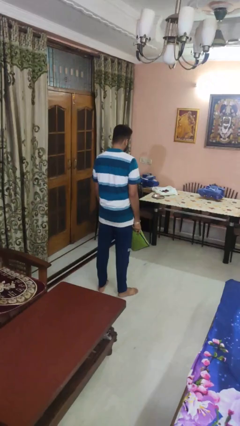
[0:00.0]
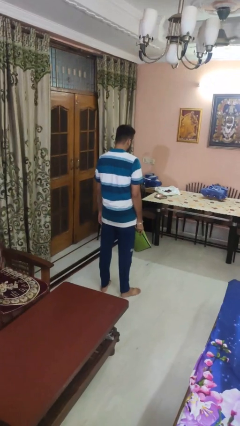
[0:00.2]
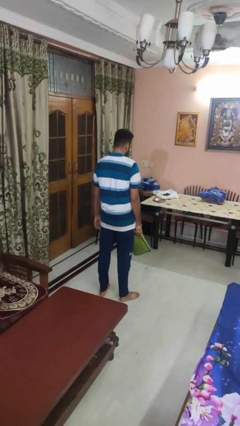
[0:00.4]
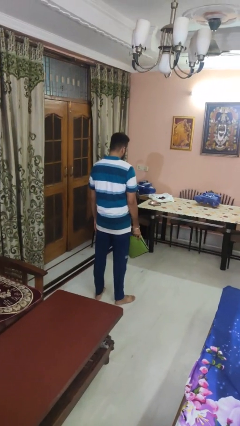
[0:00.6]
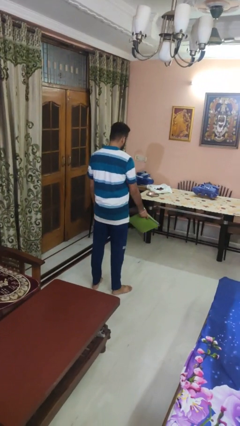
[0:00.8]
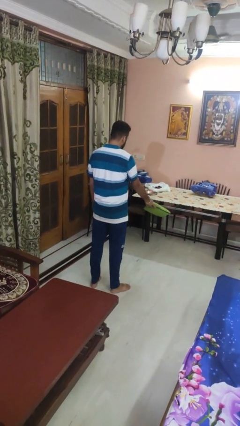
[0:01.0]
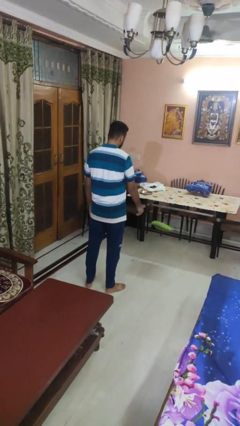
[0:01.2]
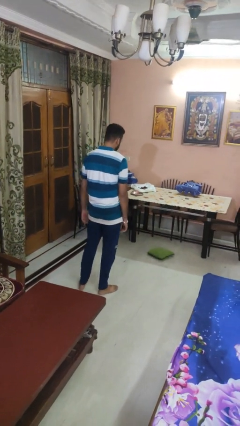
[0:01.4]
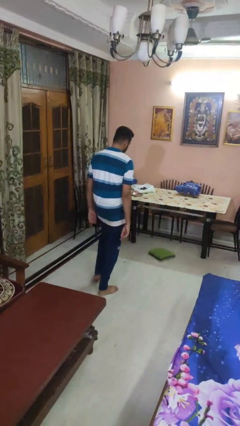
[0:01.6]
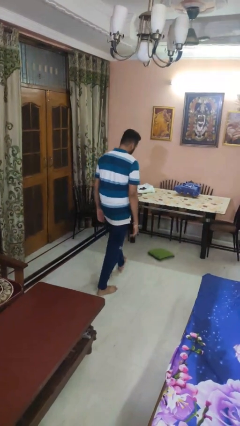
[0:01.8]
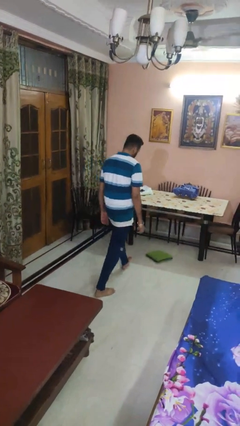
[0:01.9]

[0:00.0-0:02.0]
person throws object to ground

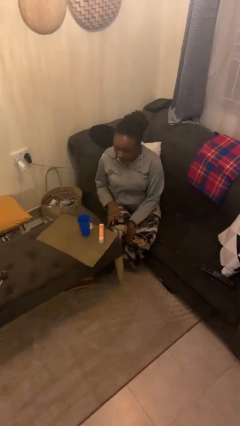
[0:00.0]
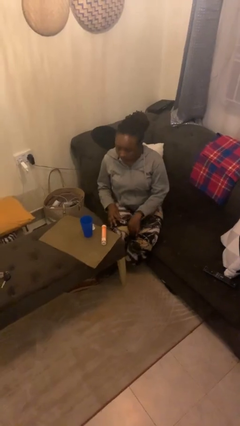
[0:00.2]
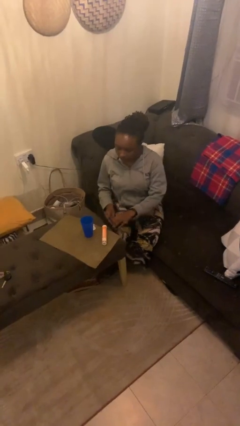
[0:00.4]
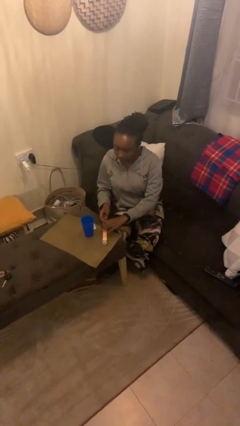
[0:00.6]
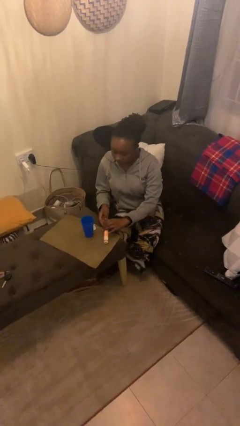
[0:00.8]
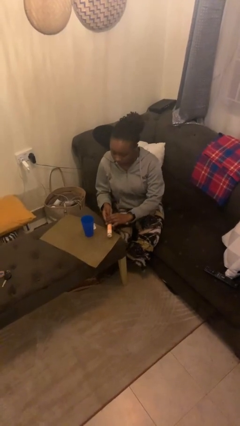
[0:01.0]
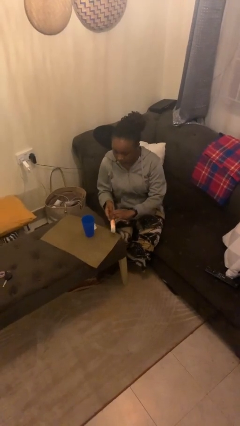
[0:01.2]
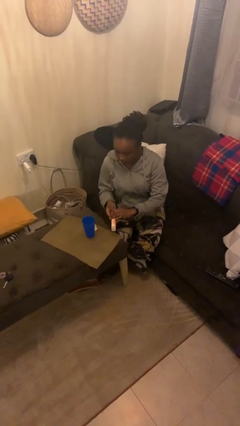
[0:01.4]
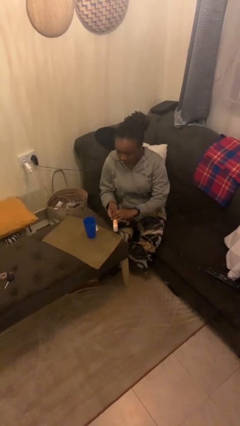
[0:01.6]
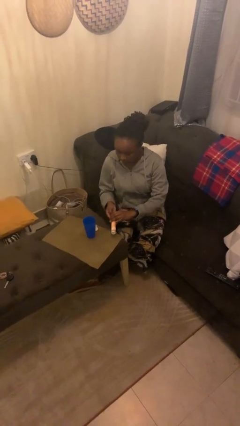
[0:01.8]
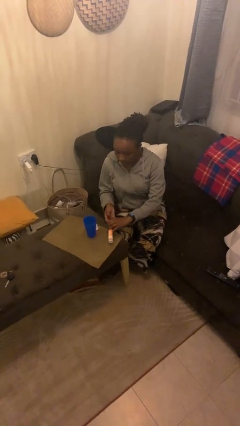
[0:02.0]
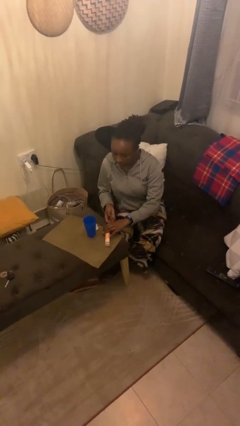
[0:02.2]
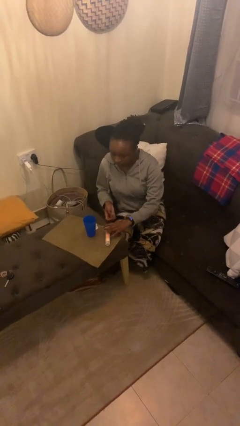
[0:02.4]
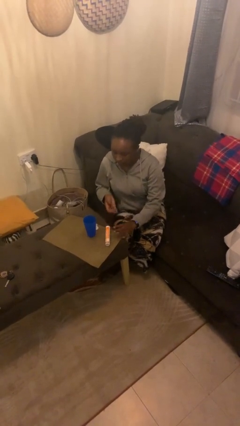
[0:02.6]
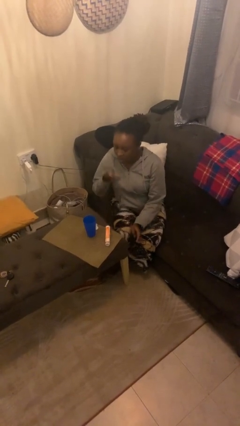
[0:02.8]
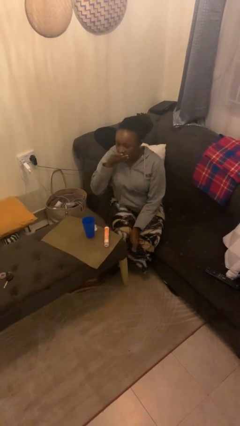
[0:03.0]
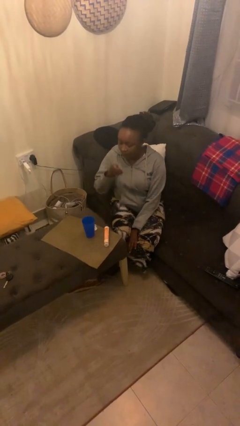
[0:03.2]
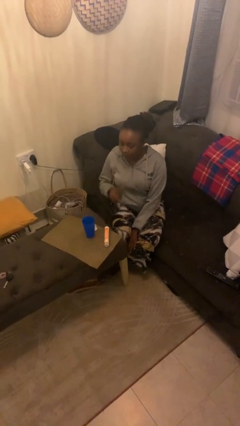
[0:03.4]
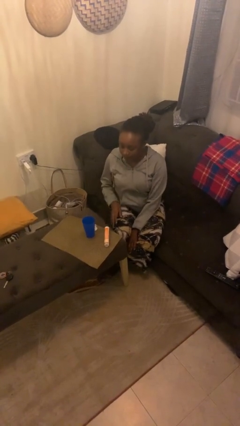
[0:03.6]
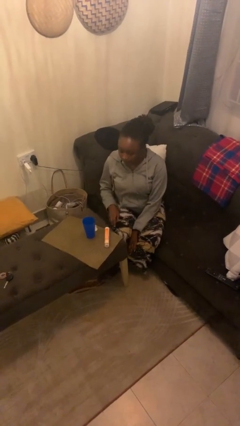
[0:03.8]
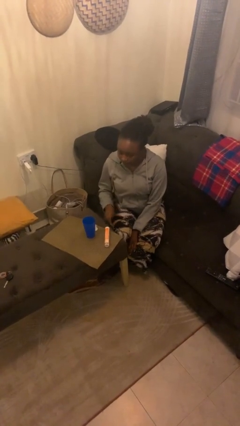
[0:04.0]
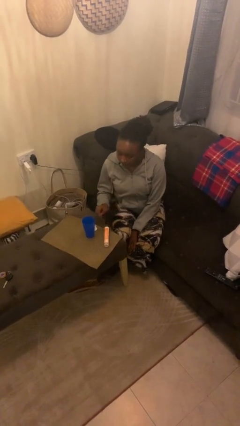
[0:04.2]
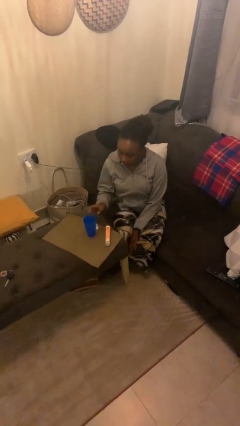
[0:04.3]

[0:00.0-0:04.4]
person takes medicine pills

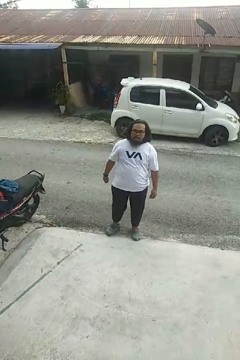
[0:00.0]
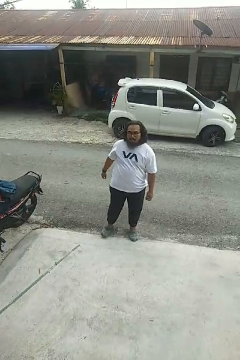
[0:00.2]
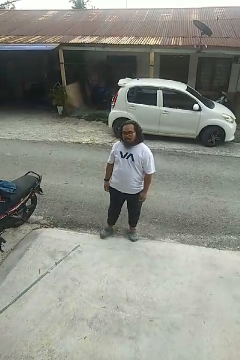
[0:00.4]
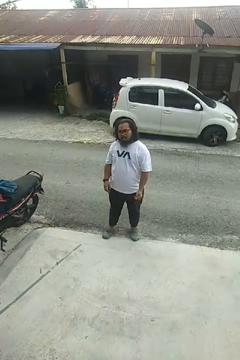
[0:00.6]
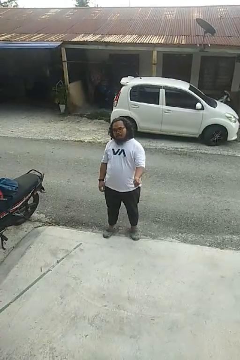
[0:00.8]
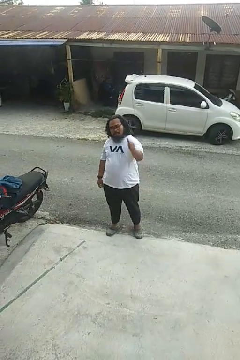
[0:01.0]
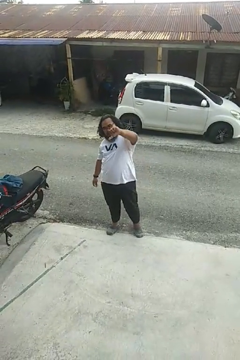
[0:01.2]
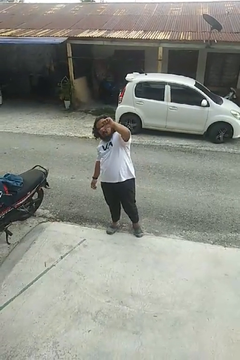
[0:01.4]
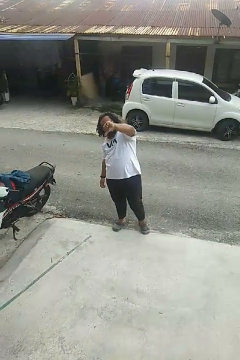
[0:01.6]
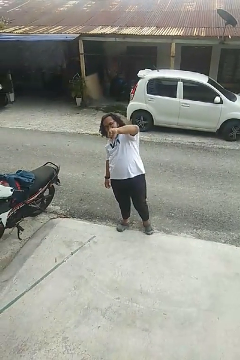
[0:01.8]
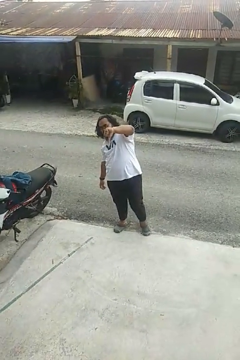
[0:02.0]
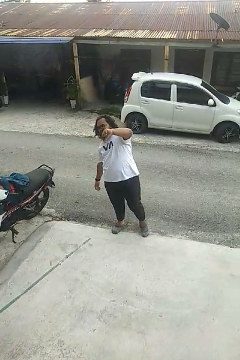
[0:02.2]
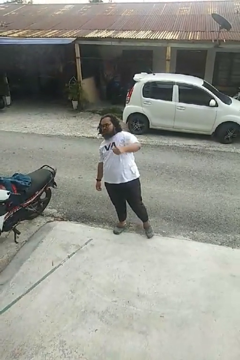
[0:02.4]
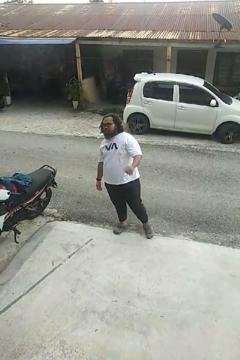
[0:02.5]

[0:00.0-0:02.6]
person gestures thumbs down

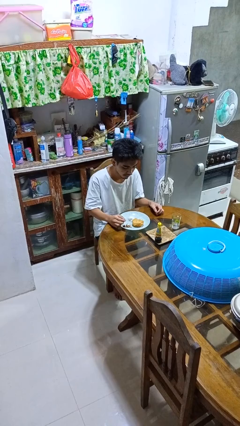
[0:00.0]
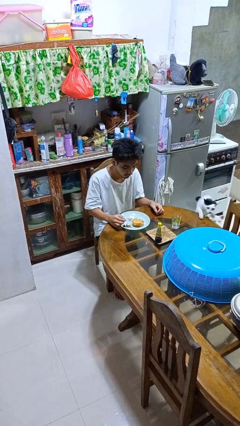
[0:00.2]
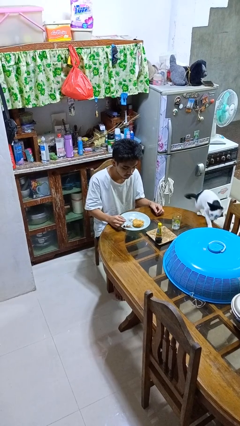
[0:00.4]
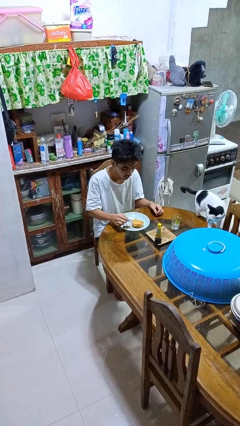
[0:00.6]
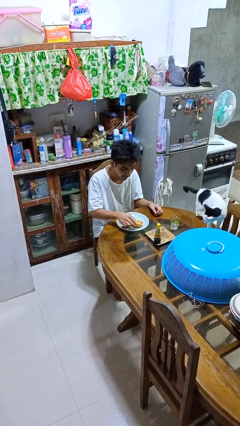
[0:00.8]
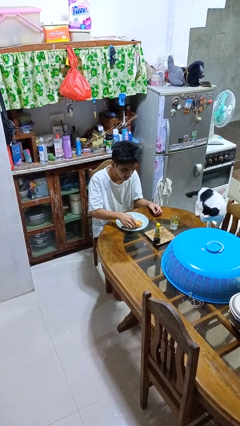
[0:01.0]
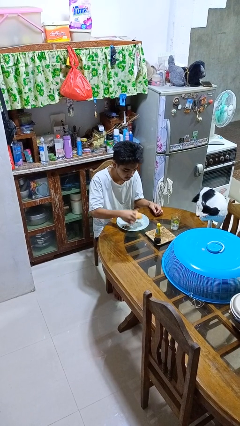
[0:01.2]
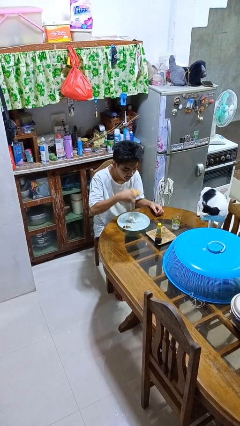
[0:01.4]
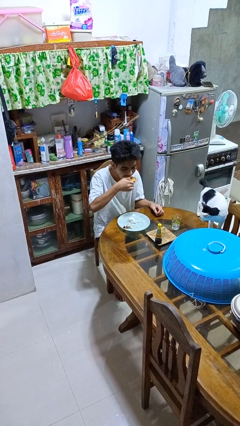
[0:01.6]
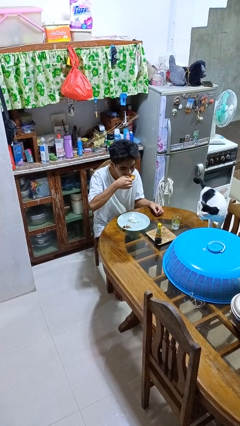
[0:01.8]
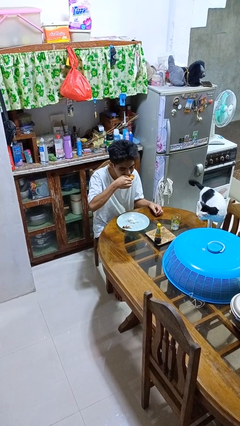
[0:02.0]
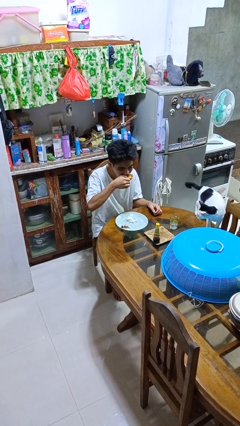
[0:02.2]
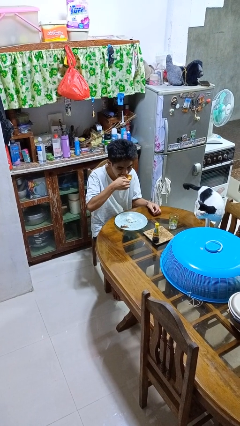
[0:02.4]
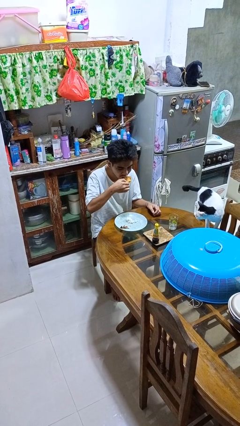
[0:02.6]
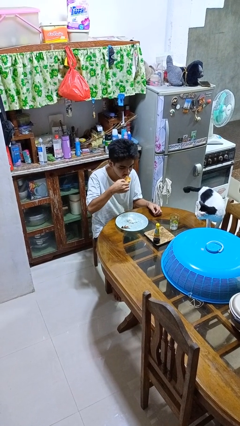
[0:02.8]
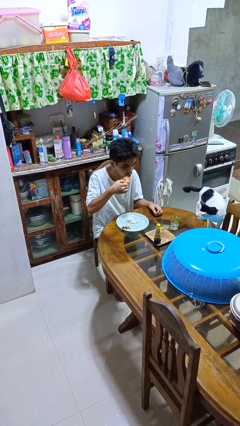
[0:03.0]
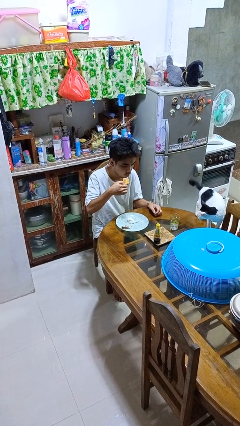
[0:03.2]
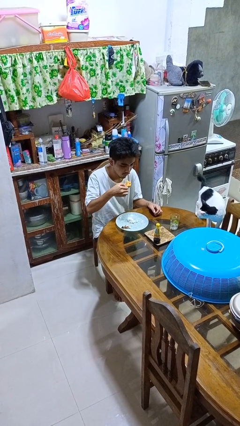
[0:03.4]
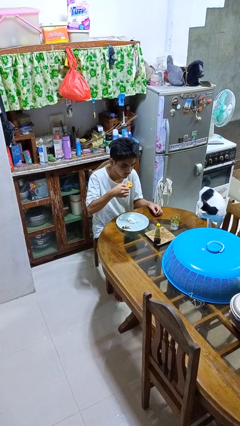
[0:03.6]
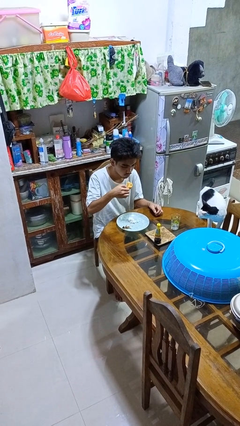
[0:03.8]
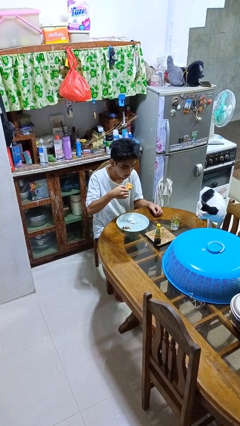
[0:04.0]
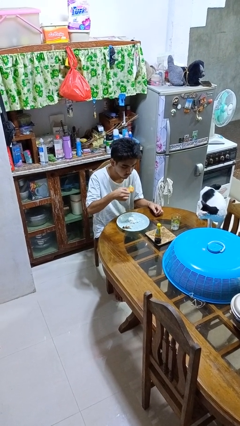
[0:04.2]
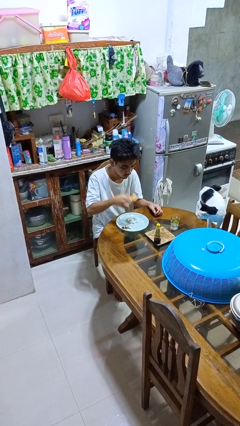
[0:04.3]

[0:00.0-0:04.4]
person eats with hands

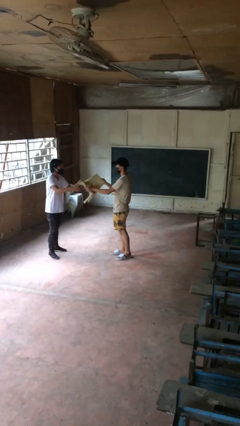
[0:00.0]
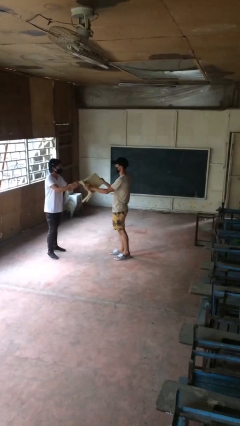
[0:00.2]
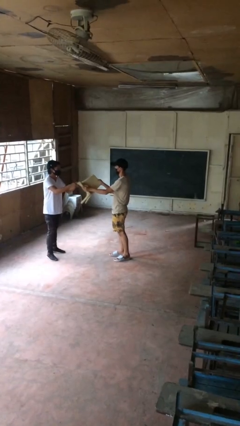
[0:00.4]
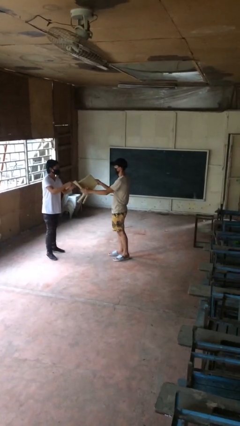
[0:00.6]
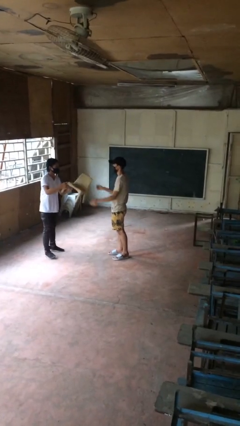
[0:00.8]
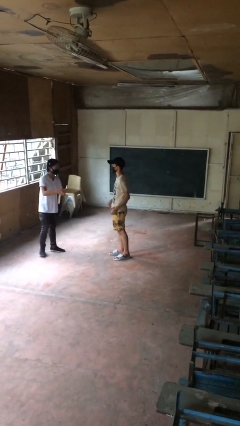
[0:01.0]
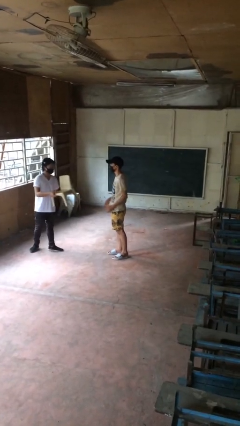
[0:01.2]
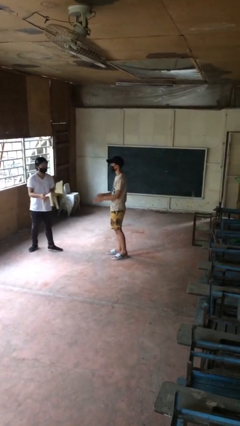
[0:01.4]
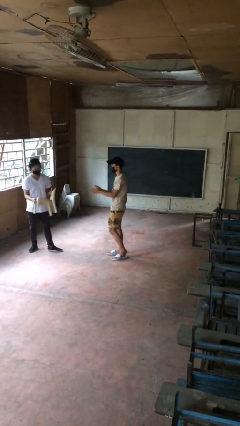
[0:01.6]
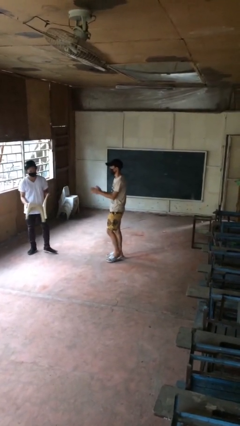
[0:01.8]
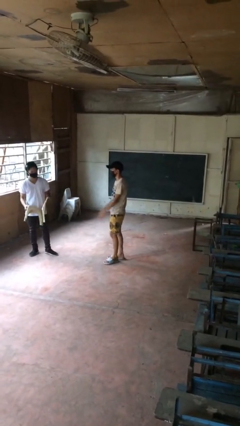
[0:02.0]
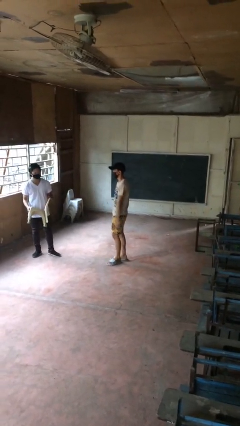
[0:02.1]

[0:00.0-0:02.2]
person transfers object to person

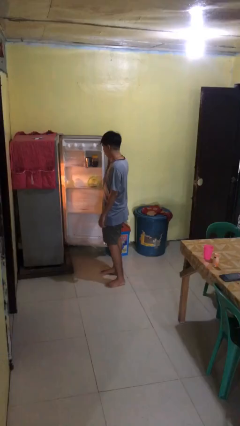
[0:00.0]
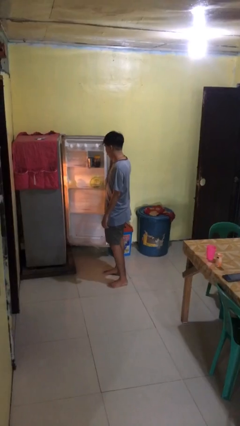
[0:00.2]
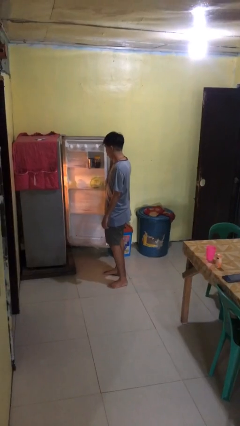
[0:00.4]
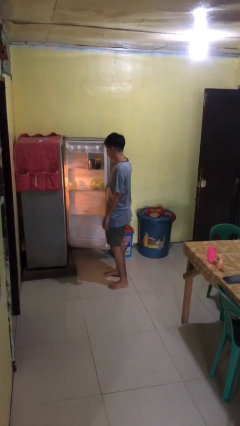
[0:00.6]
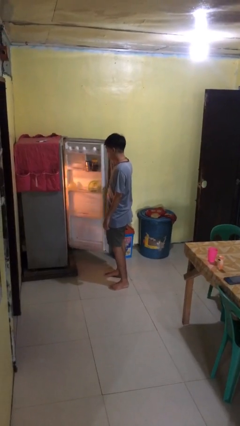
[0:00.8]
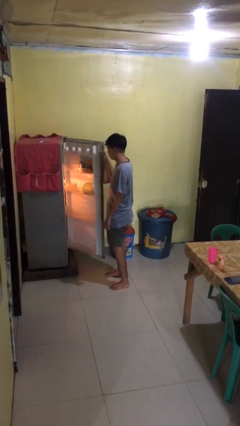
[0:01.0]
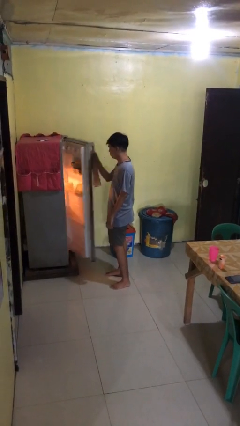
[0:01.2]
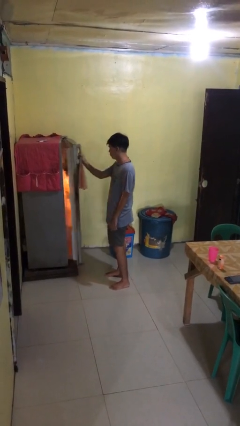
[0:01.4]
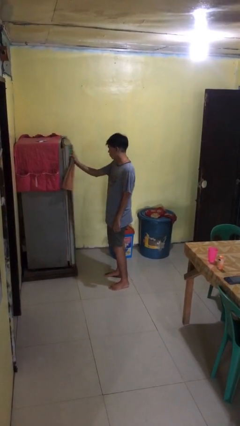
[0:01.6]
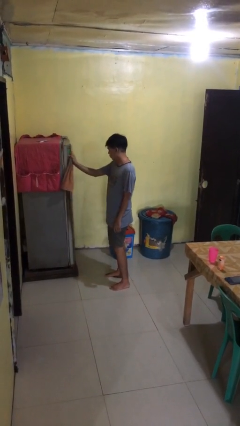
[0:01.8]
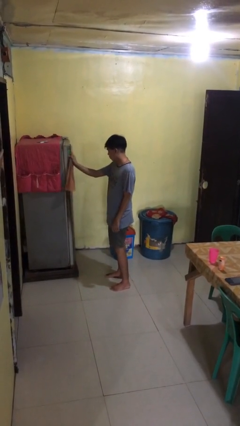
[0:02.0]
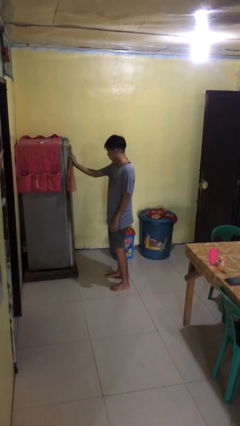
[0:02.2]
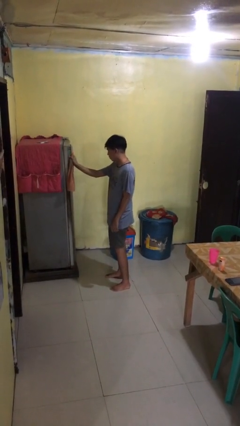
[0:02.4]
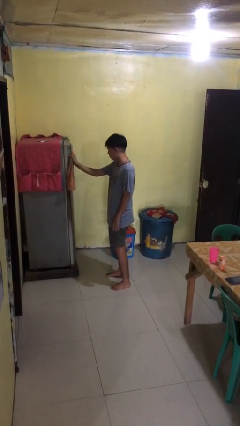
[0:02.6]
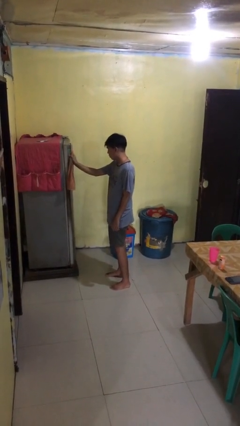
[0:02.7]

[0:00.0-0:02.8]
person closes refrigerator
